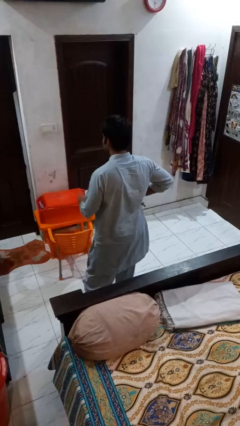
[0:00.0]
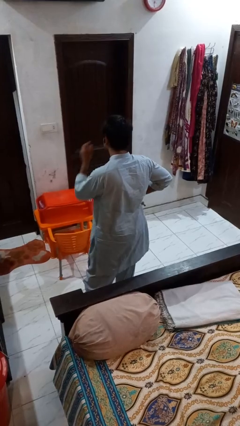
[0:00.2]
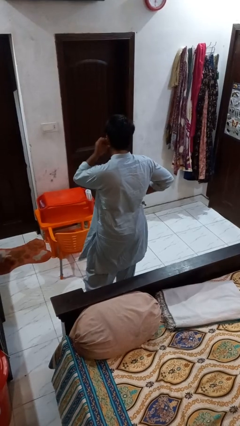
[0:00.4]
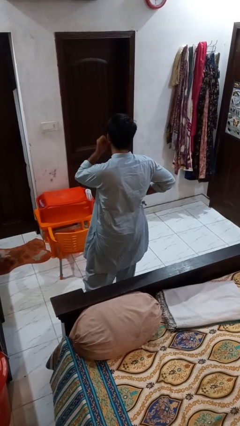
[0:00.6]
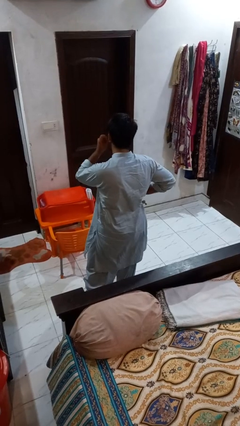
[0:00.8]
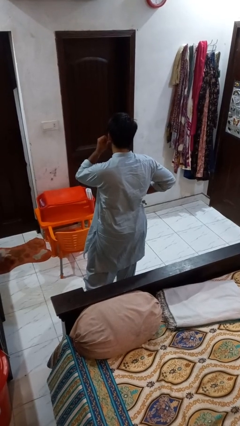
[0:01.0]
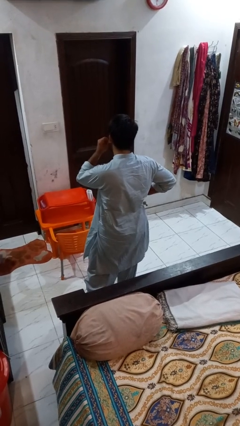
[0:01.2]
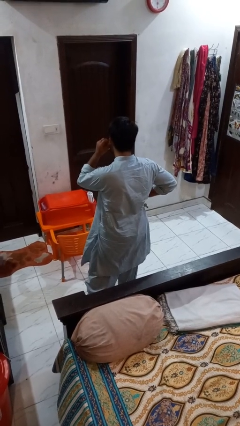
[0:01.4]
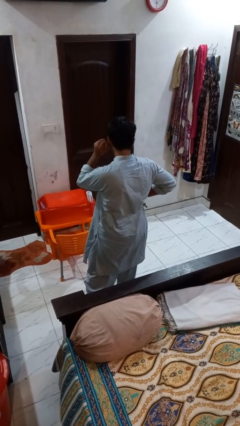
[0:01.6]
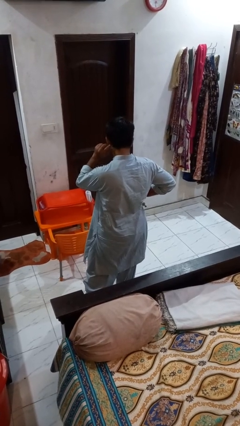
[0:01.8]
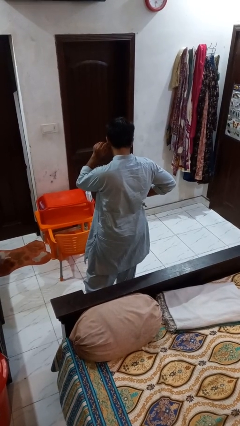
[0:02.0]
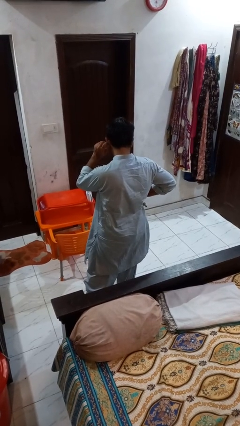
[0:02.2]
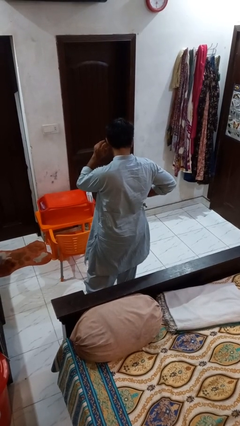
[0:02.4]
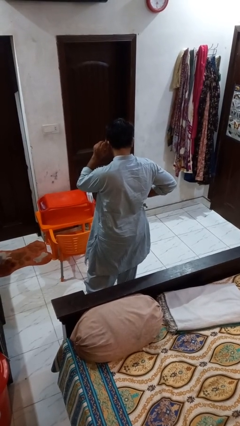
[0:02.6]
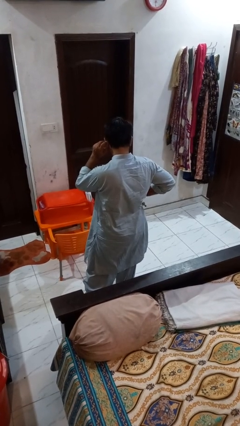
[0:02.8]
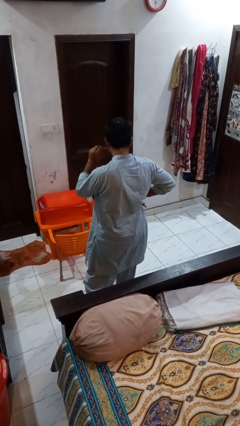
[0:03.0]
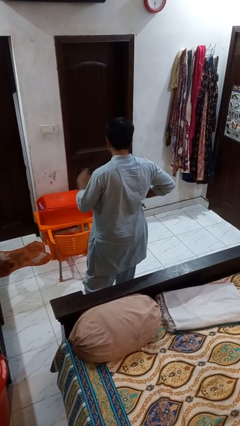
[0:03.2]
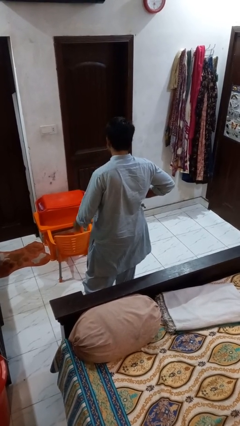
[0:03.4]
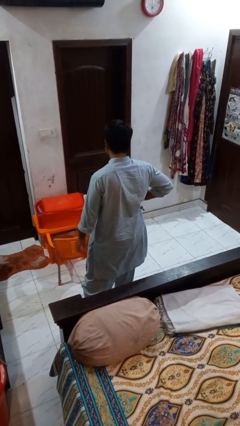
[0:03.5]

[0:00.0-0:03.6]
person touches earlobe

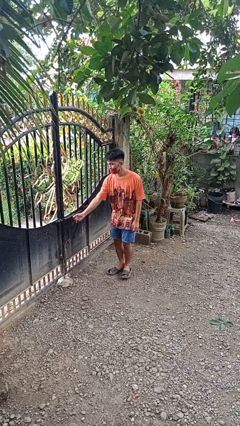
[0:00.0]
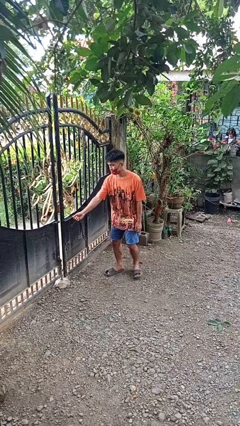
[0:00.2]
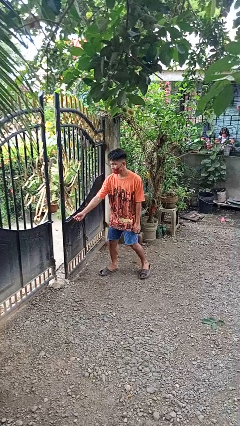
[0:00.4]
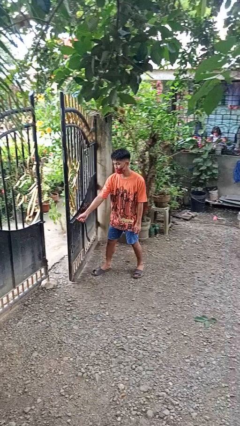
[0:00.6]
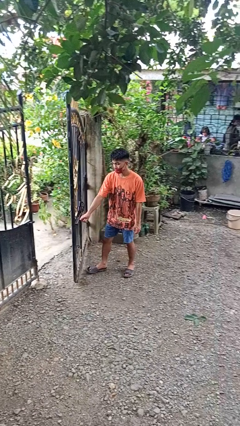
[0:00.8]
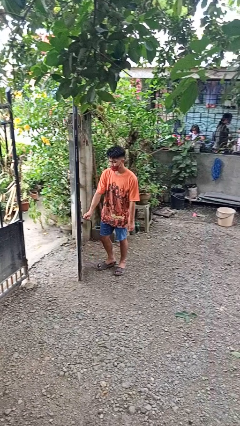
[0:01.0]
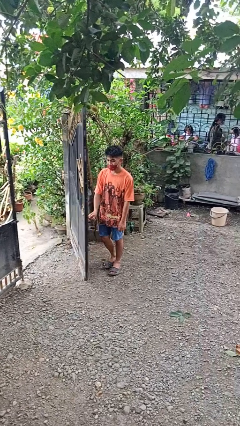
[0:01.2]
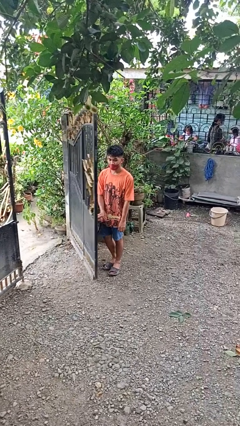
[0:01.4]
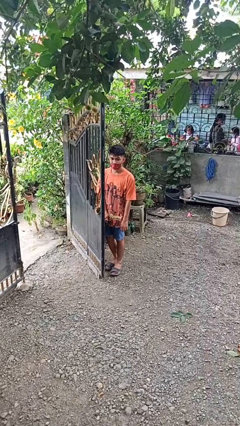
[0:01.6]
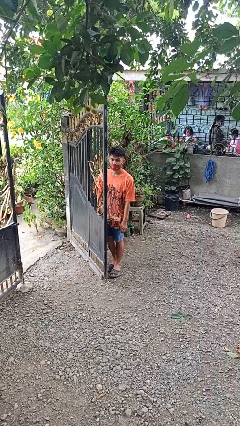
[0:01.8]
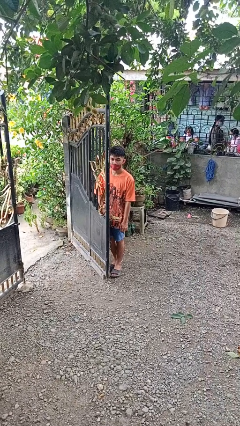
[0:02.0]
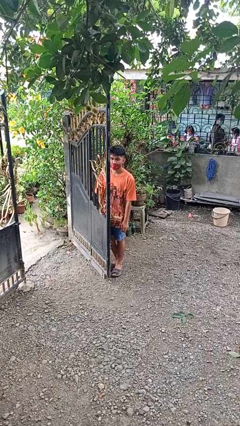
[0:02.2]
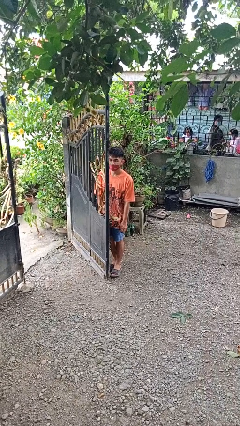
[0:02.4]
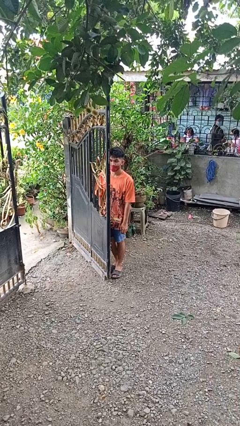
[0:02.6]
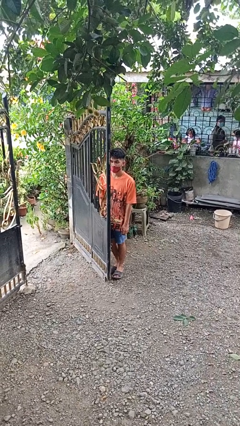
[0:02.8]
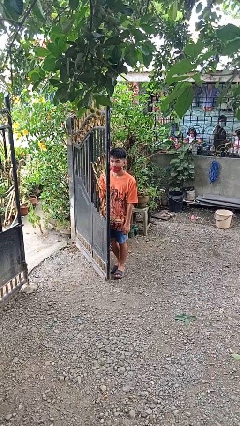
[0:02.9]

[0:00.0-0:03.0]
person opens gate

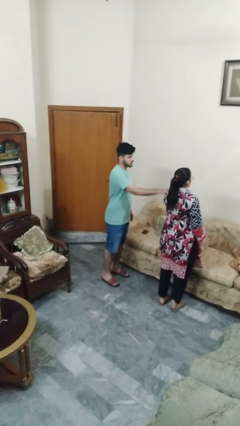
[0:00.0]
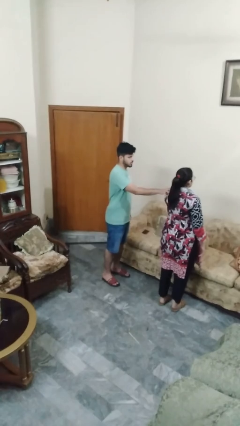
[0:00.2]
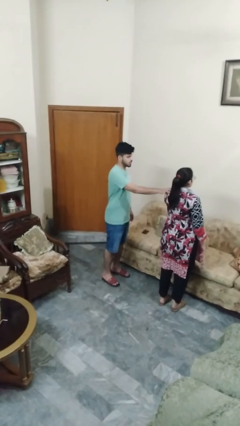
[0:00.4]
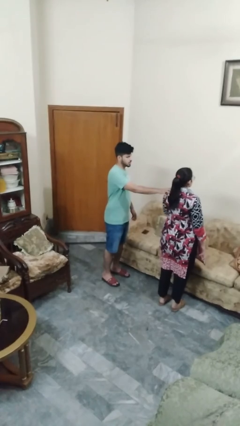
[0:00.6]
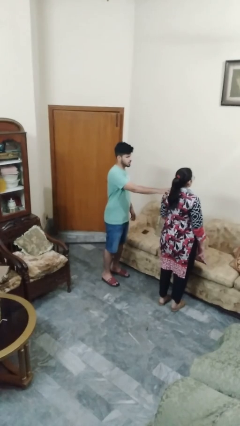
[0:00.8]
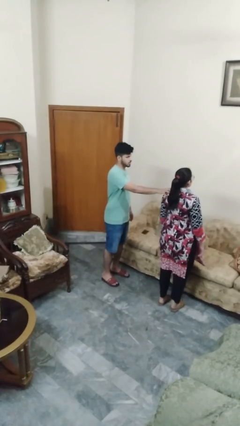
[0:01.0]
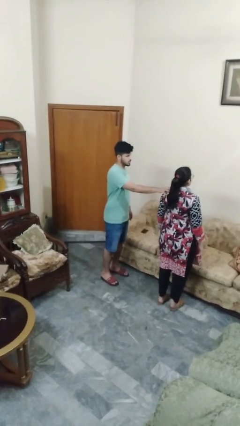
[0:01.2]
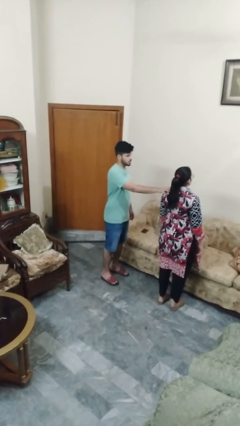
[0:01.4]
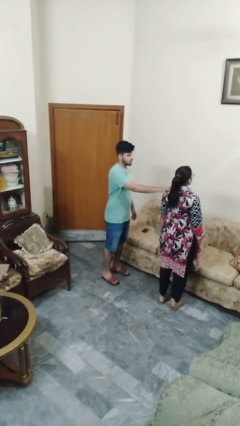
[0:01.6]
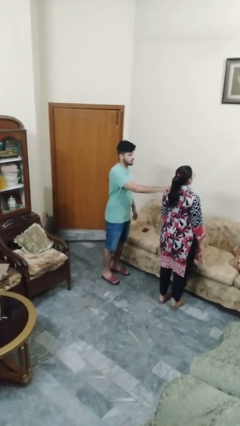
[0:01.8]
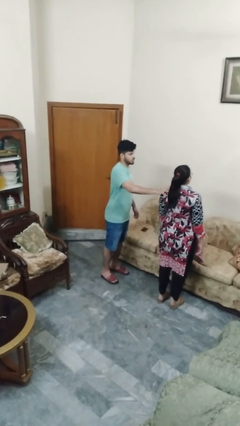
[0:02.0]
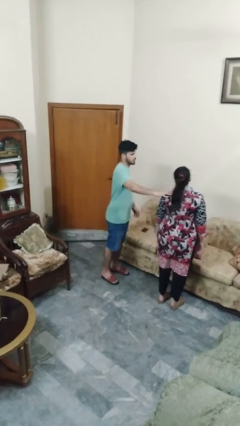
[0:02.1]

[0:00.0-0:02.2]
person grabs person by shoulder

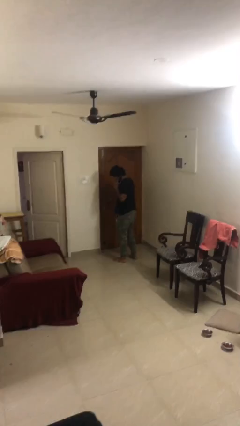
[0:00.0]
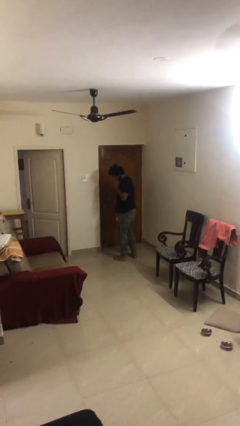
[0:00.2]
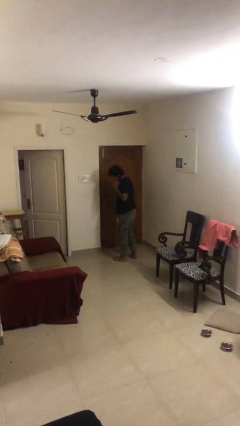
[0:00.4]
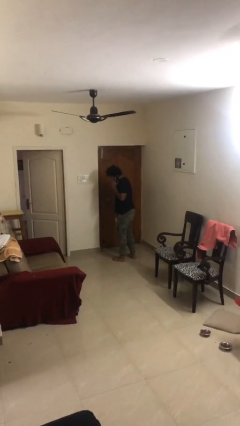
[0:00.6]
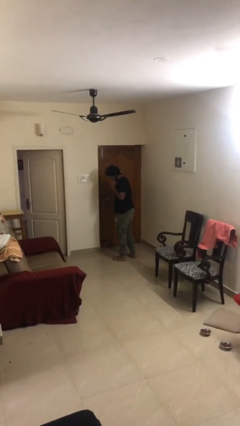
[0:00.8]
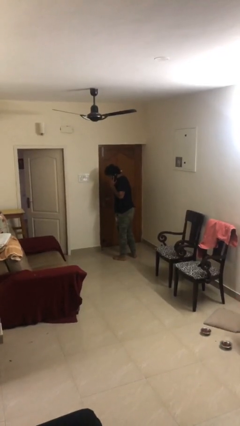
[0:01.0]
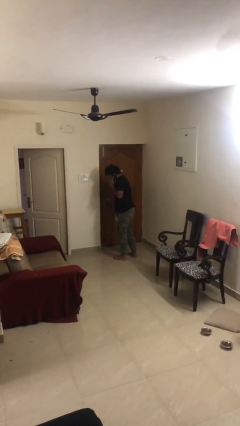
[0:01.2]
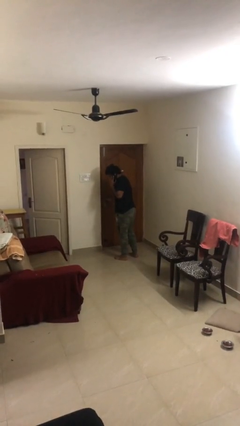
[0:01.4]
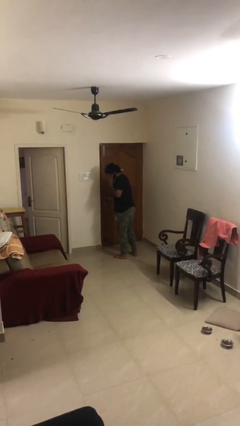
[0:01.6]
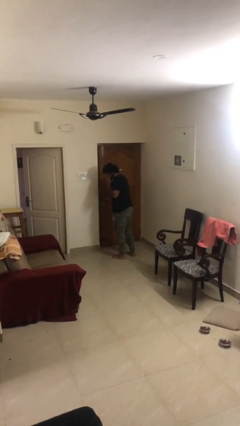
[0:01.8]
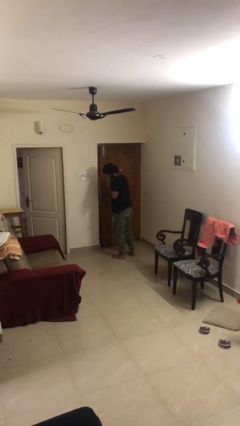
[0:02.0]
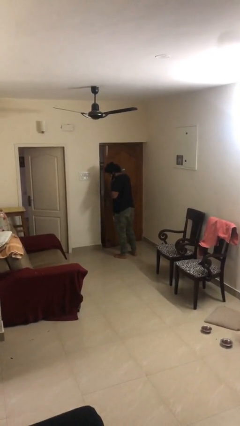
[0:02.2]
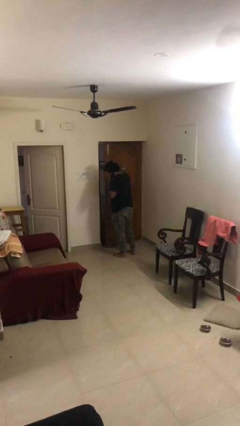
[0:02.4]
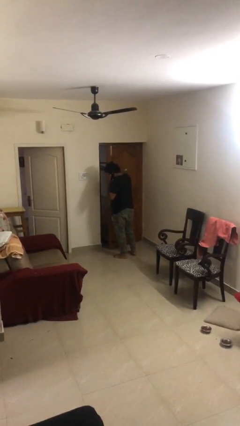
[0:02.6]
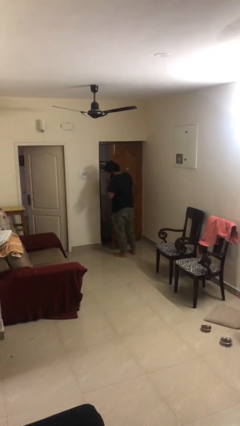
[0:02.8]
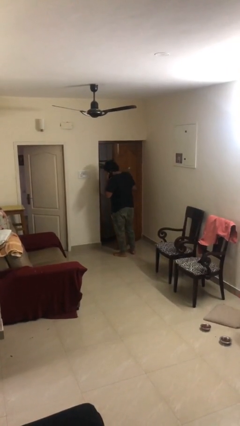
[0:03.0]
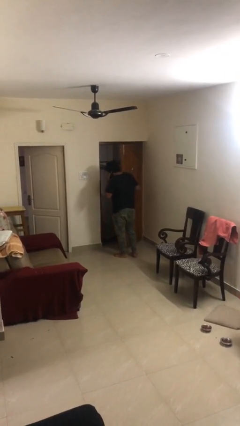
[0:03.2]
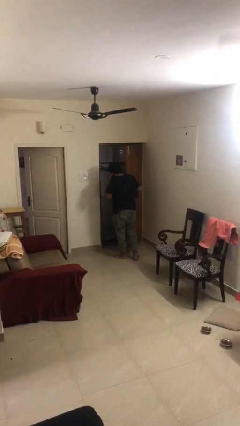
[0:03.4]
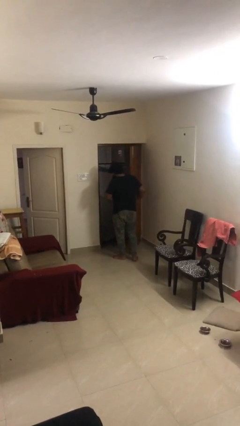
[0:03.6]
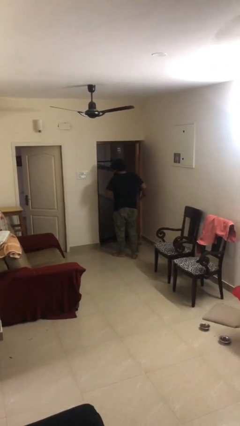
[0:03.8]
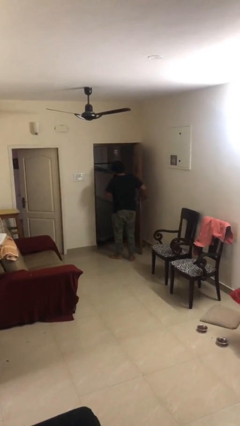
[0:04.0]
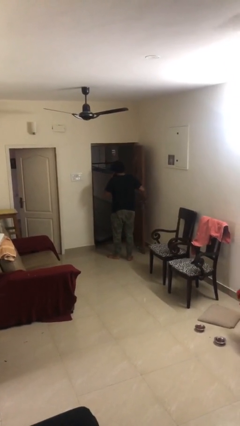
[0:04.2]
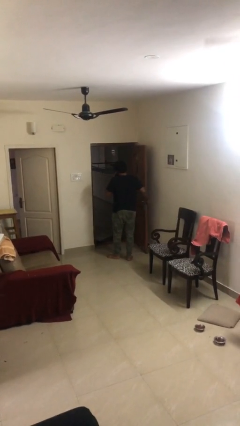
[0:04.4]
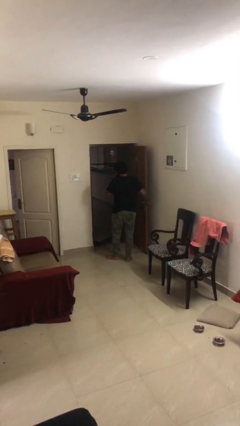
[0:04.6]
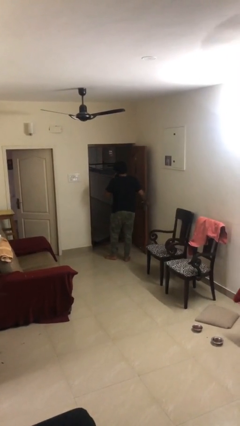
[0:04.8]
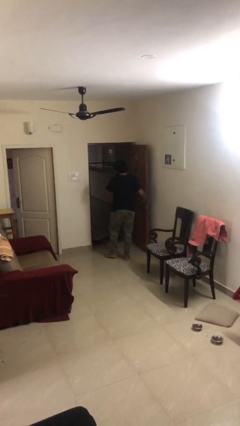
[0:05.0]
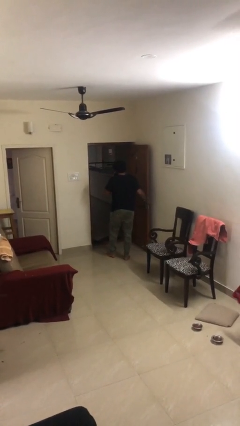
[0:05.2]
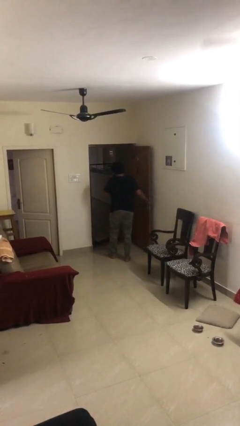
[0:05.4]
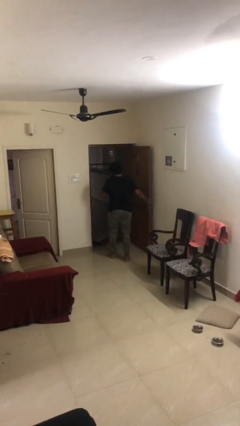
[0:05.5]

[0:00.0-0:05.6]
person opens facility door

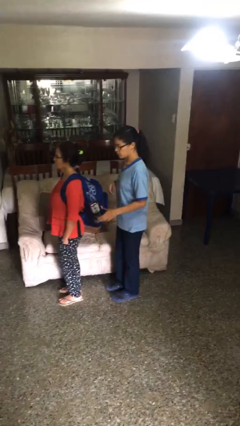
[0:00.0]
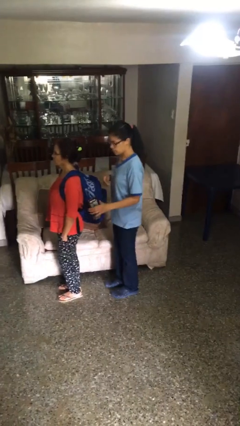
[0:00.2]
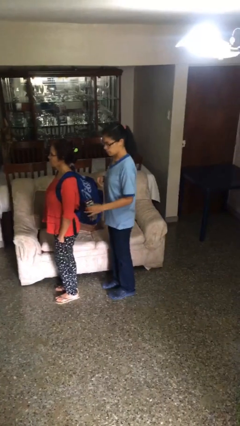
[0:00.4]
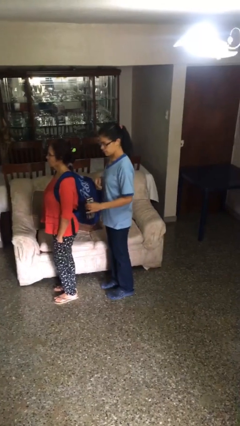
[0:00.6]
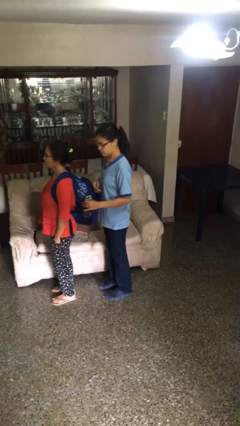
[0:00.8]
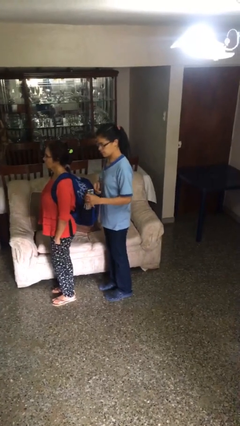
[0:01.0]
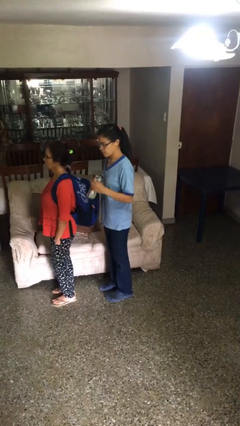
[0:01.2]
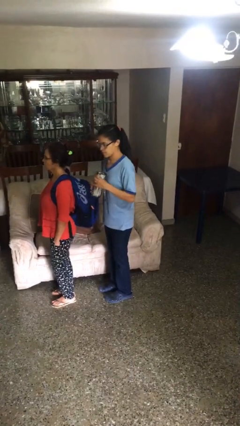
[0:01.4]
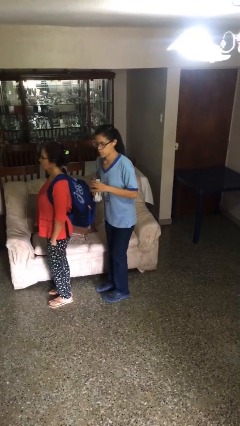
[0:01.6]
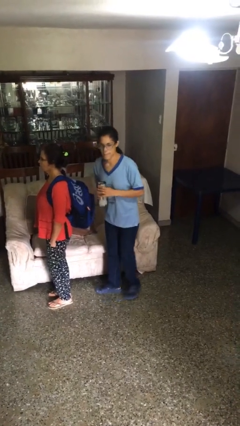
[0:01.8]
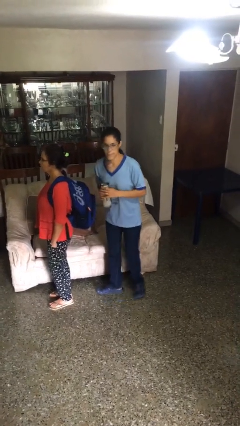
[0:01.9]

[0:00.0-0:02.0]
person steals object from person

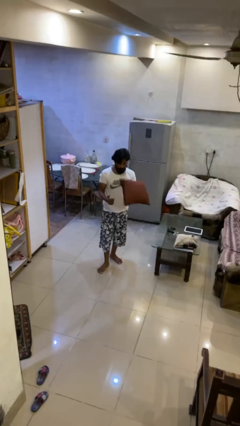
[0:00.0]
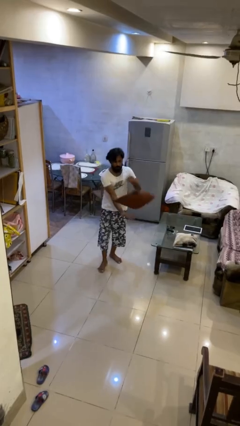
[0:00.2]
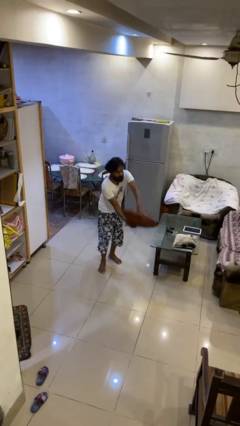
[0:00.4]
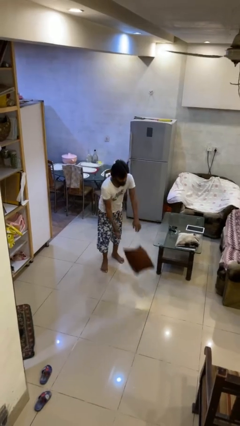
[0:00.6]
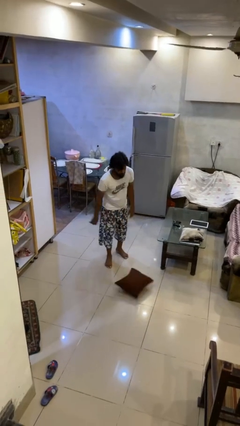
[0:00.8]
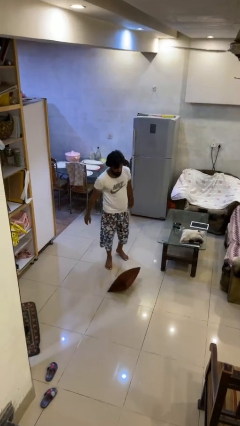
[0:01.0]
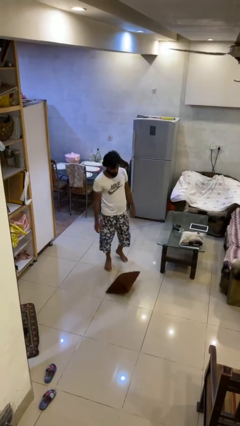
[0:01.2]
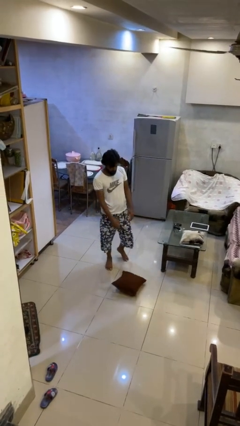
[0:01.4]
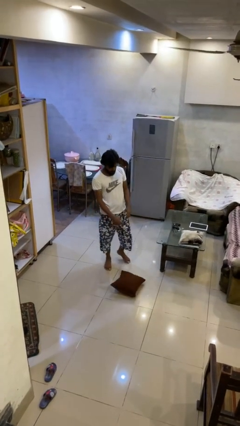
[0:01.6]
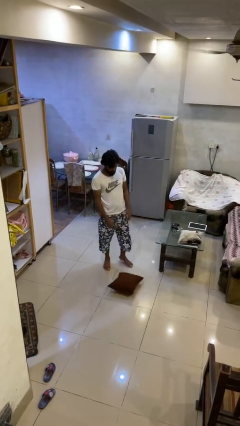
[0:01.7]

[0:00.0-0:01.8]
person drops object
